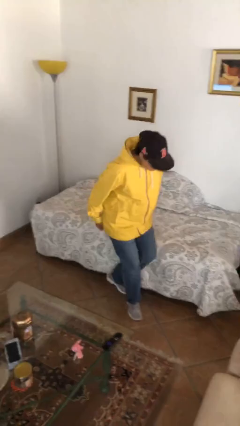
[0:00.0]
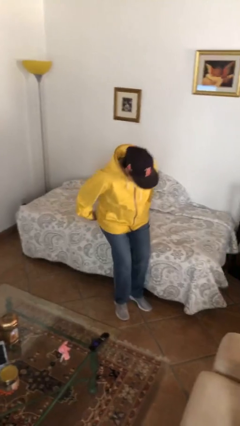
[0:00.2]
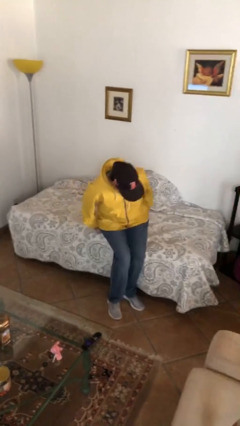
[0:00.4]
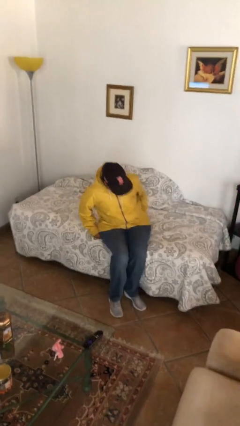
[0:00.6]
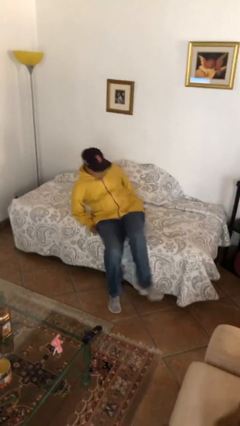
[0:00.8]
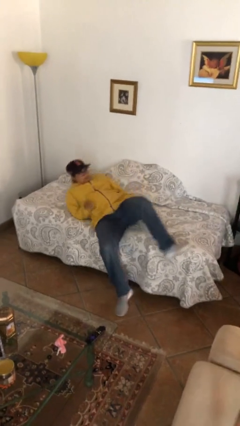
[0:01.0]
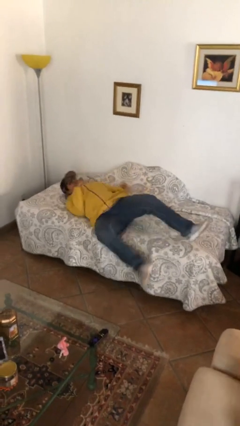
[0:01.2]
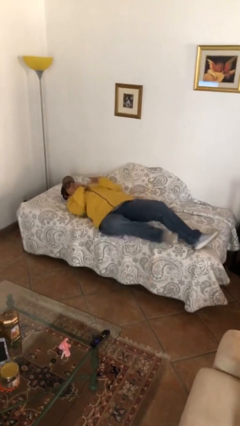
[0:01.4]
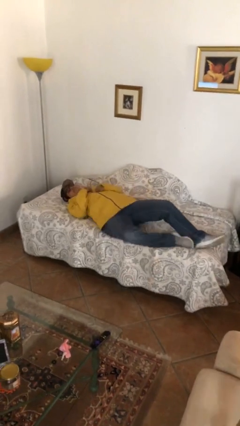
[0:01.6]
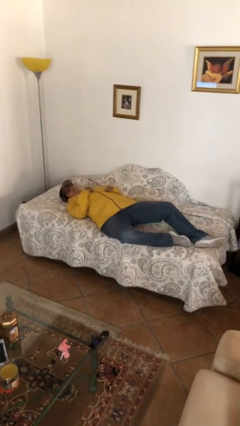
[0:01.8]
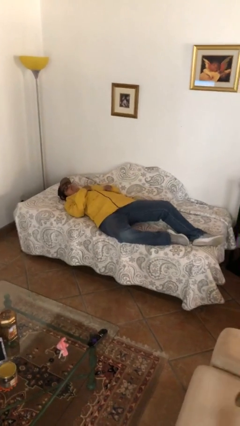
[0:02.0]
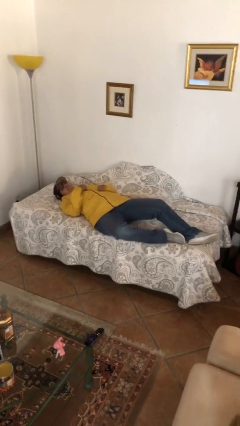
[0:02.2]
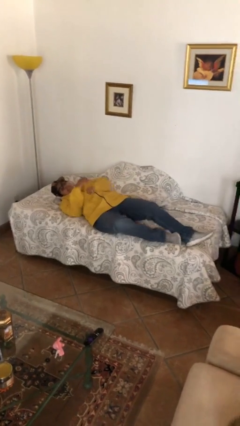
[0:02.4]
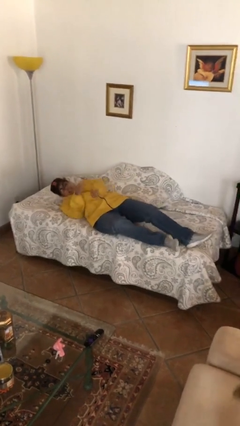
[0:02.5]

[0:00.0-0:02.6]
person lies down on bed

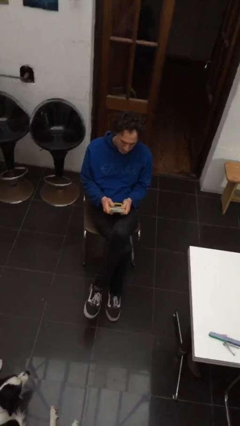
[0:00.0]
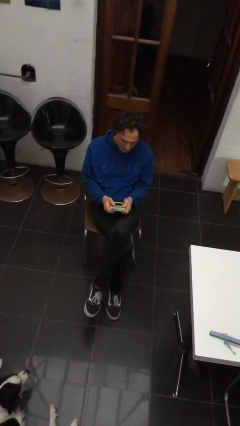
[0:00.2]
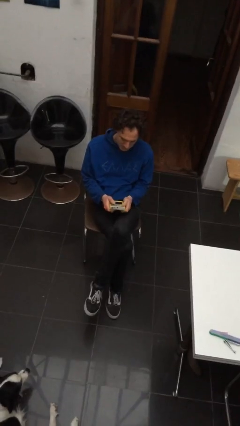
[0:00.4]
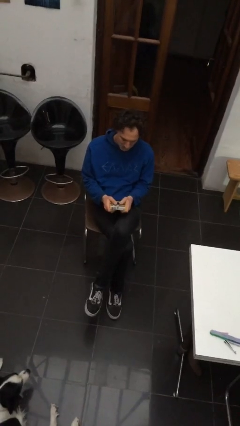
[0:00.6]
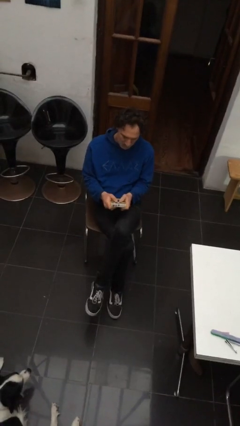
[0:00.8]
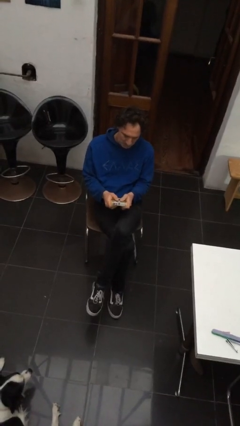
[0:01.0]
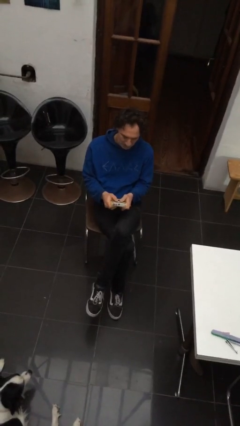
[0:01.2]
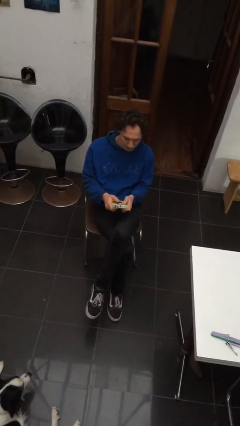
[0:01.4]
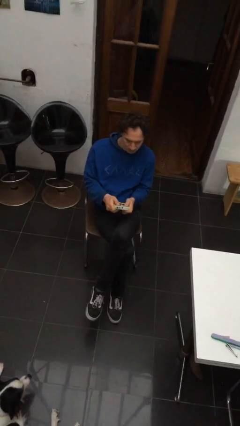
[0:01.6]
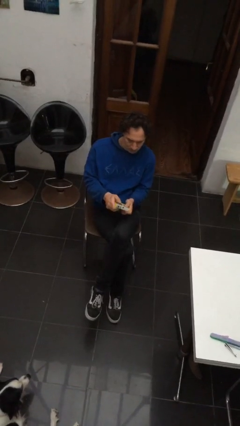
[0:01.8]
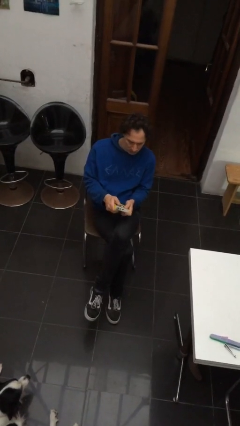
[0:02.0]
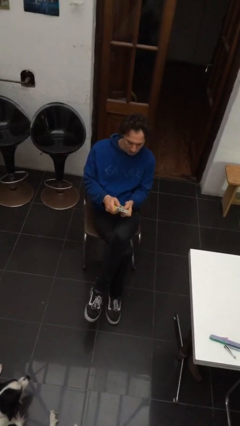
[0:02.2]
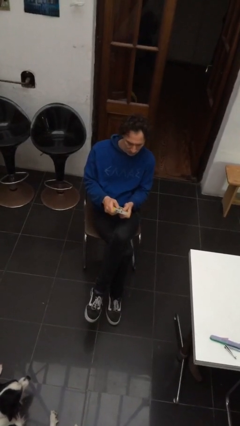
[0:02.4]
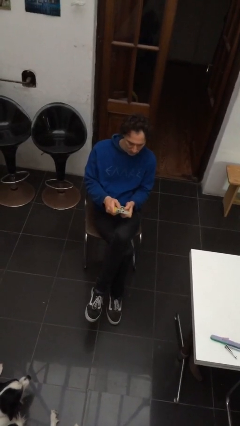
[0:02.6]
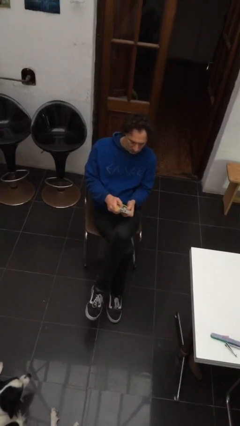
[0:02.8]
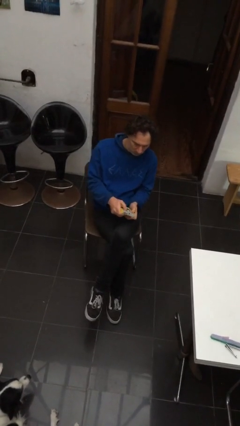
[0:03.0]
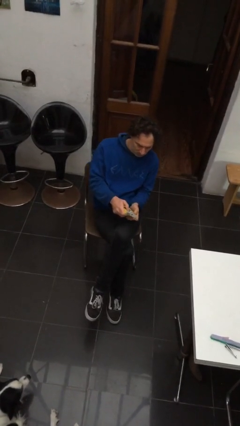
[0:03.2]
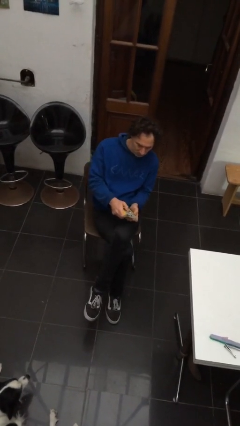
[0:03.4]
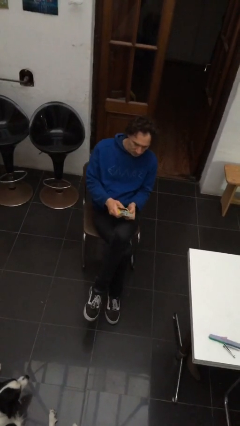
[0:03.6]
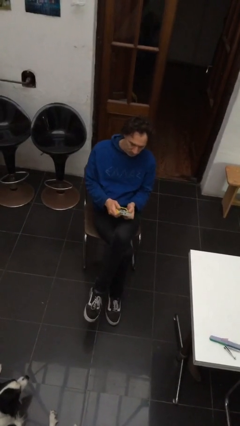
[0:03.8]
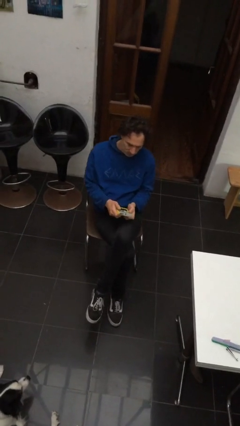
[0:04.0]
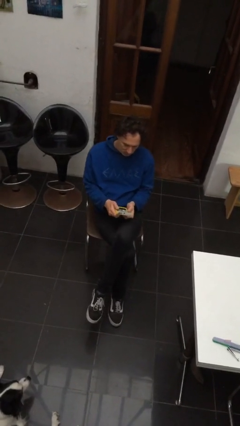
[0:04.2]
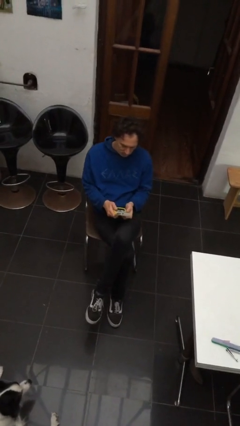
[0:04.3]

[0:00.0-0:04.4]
person interacts with handheld game

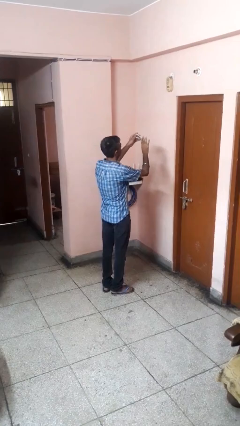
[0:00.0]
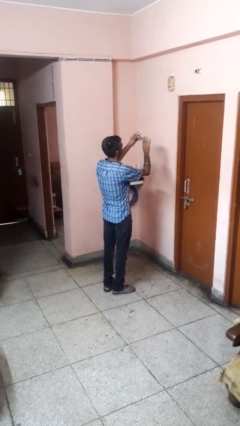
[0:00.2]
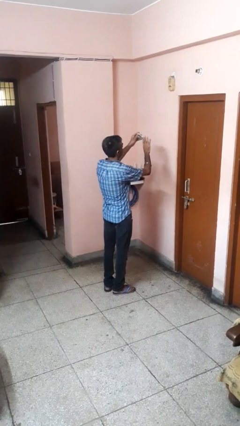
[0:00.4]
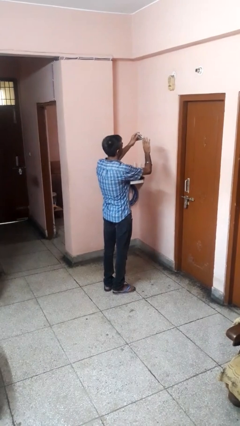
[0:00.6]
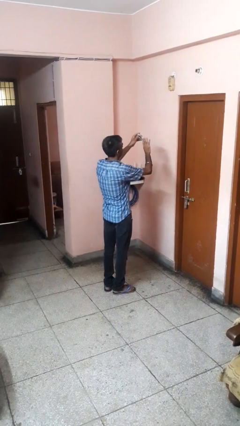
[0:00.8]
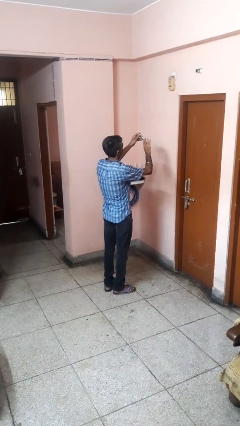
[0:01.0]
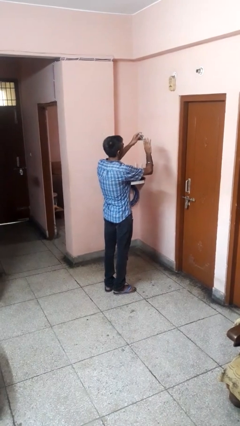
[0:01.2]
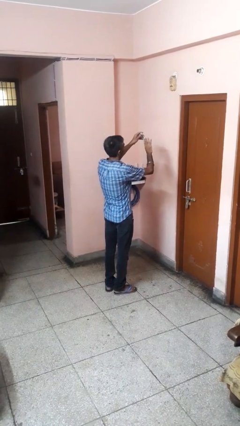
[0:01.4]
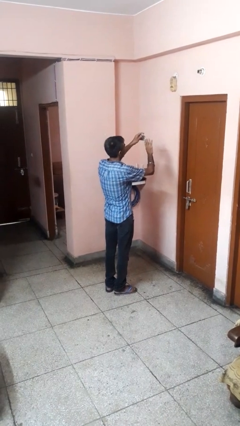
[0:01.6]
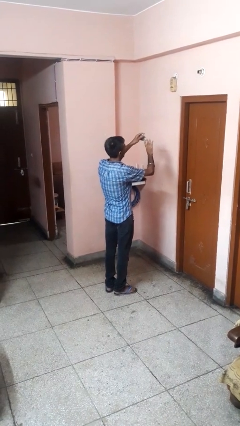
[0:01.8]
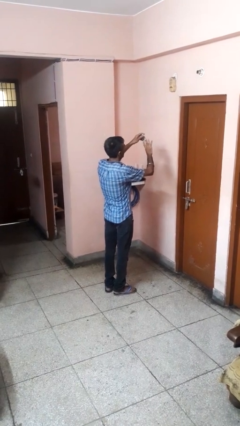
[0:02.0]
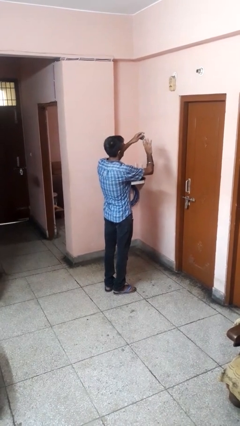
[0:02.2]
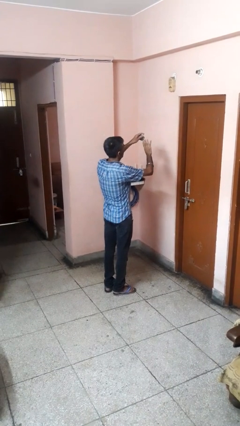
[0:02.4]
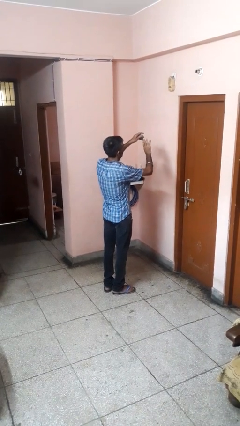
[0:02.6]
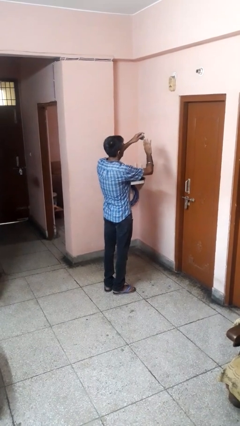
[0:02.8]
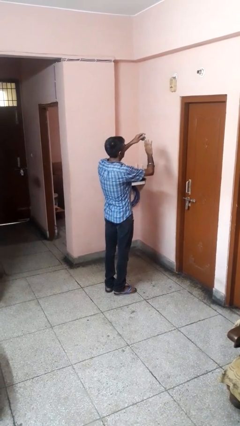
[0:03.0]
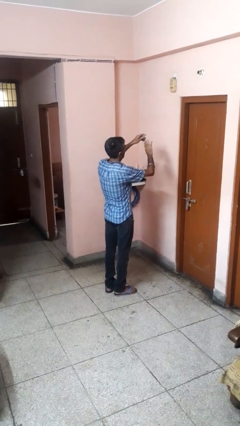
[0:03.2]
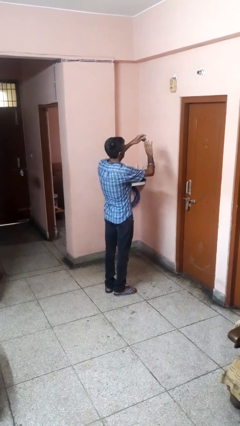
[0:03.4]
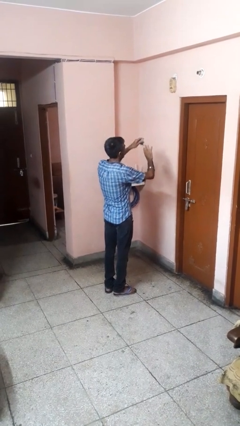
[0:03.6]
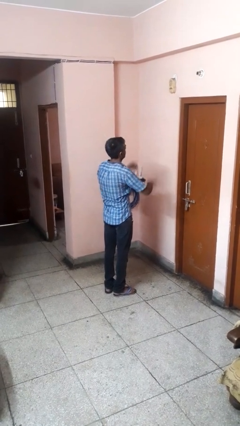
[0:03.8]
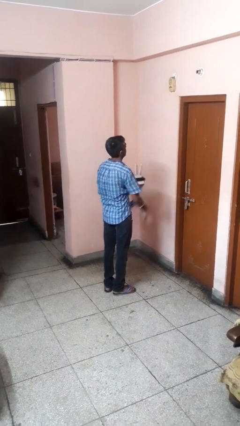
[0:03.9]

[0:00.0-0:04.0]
person clips fingernails

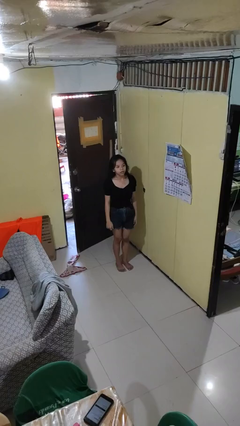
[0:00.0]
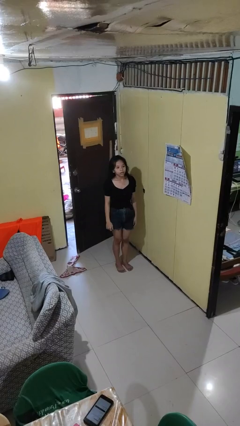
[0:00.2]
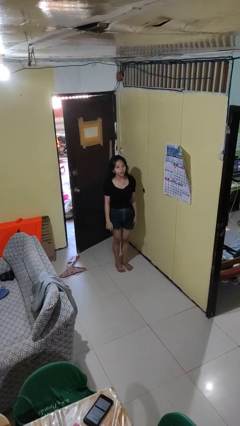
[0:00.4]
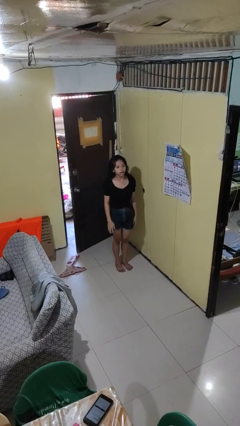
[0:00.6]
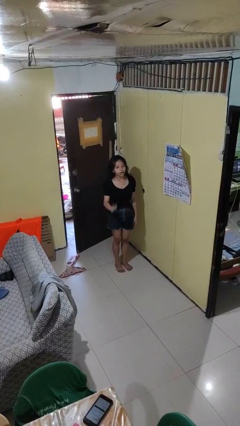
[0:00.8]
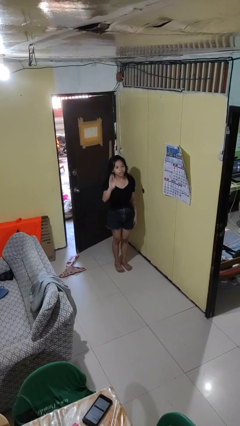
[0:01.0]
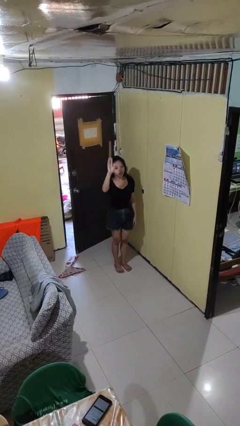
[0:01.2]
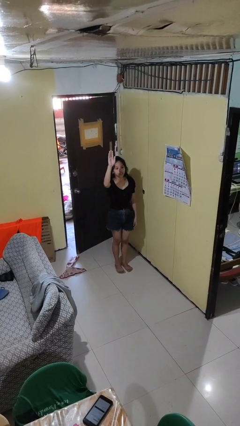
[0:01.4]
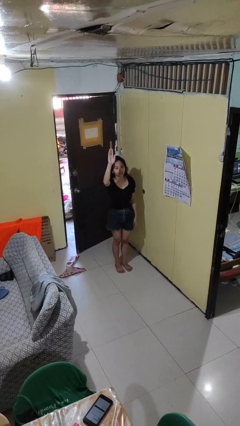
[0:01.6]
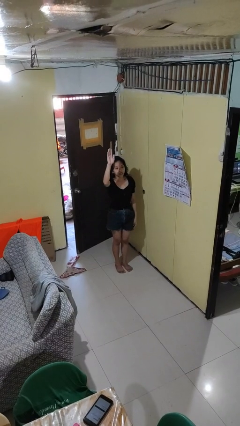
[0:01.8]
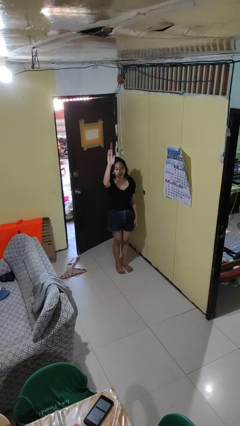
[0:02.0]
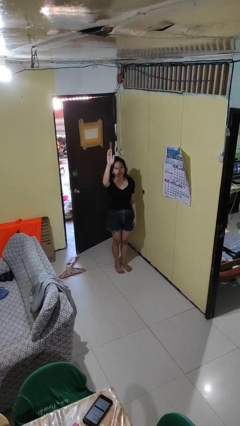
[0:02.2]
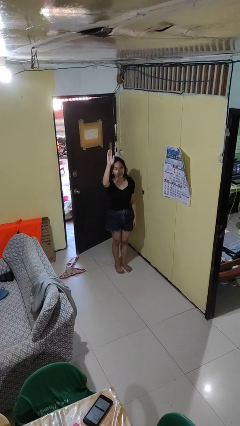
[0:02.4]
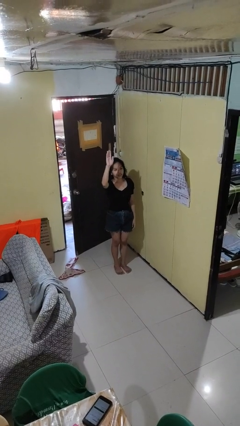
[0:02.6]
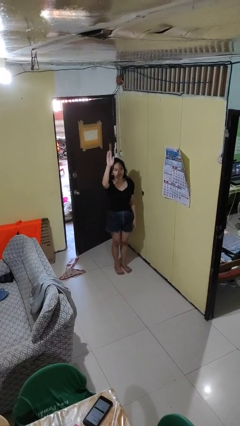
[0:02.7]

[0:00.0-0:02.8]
person gestures raise hand

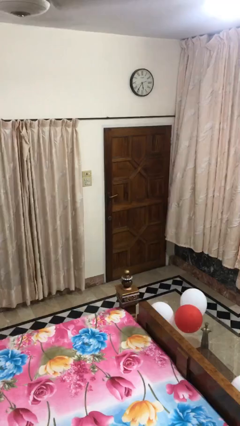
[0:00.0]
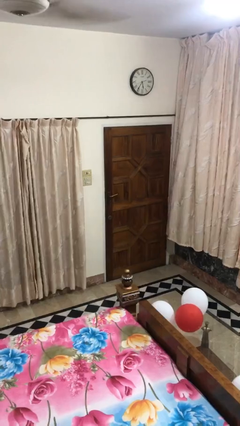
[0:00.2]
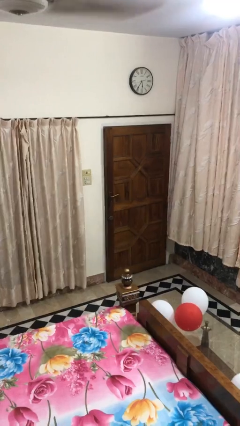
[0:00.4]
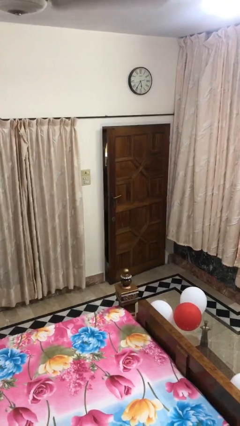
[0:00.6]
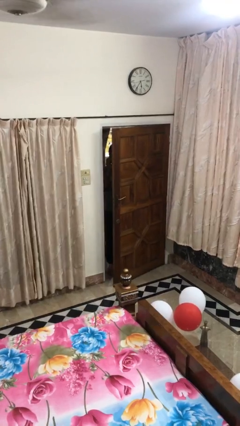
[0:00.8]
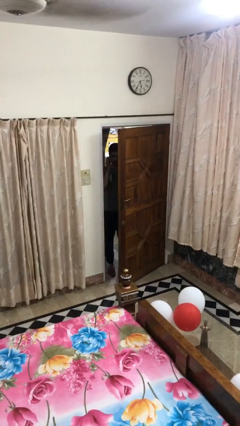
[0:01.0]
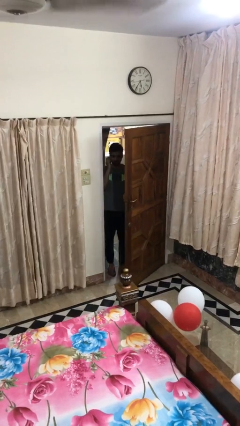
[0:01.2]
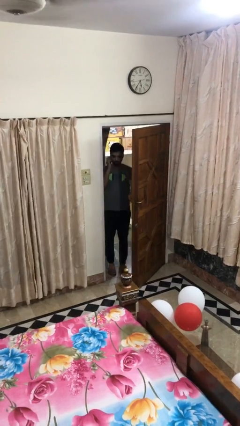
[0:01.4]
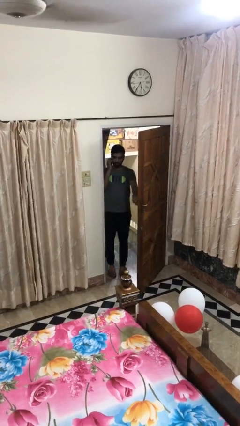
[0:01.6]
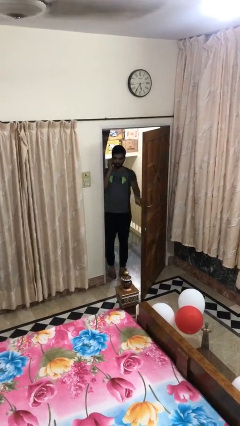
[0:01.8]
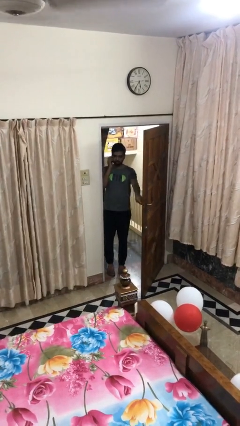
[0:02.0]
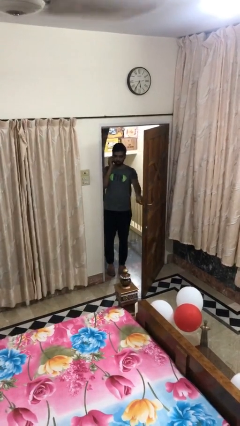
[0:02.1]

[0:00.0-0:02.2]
person opens facility door

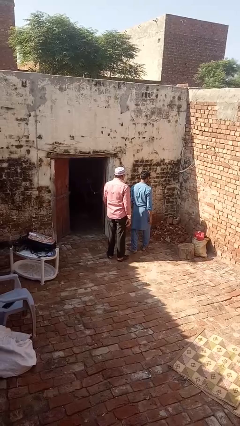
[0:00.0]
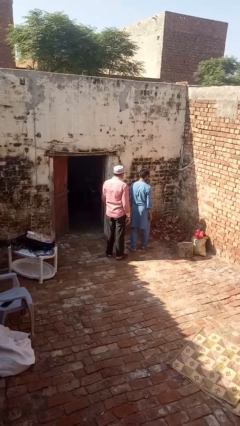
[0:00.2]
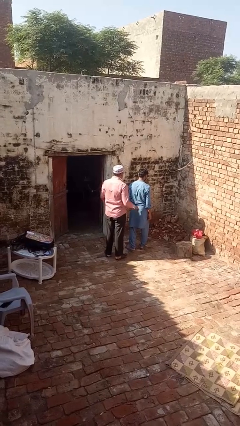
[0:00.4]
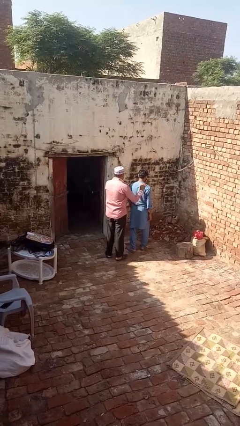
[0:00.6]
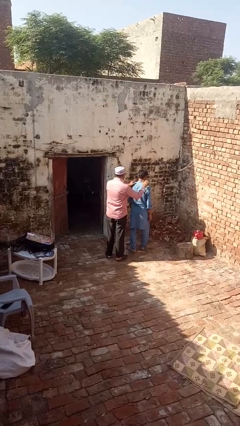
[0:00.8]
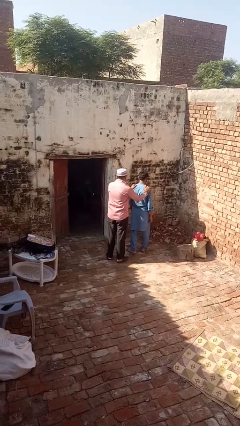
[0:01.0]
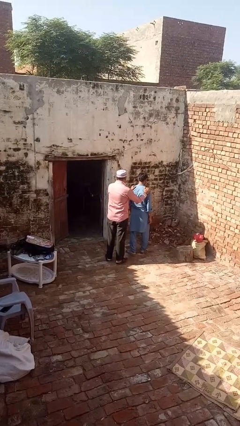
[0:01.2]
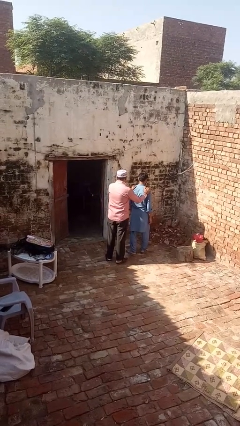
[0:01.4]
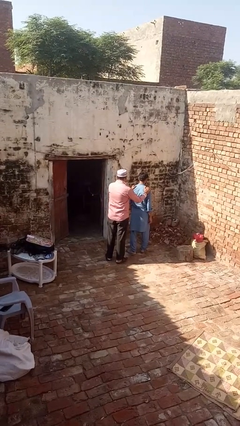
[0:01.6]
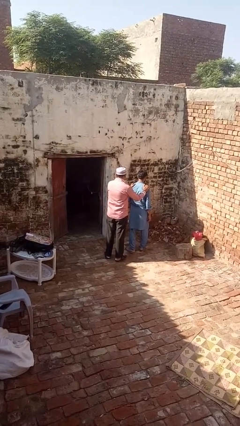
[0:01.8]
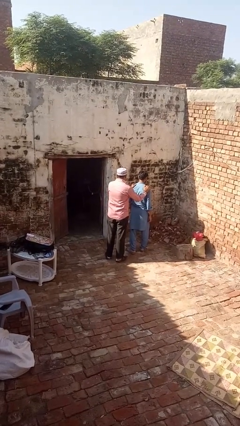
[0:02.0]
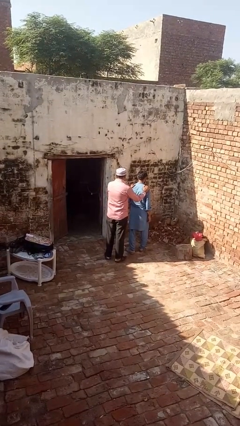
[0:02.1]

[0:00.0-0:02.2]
person grabs person by shoulder
